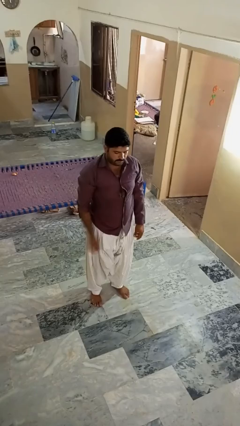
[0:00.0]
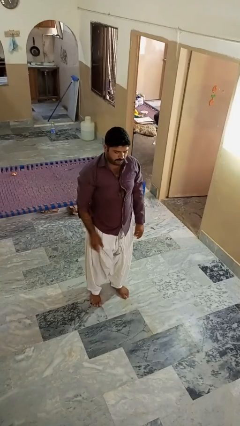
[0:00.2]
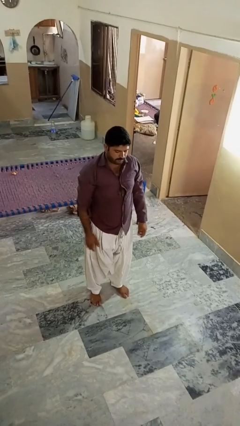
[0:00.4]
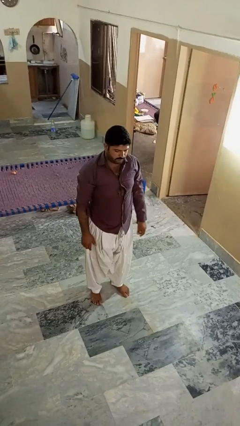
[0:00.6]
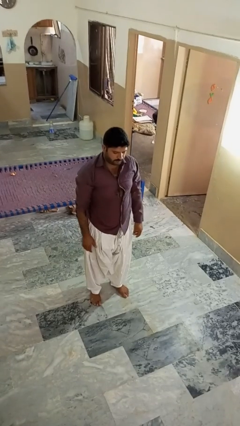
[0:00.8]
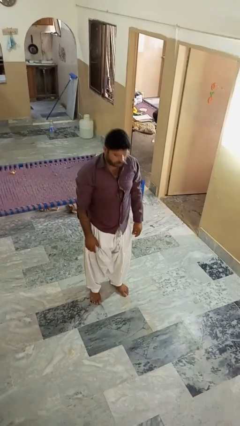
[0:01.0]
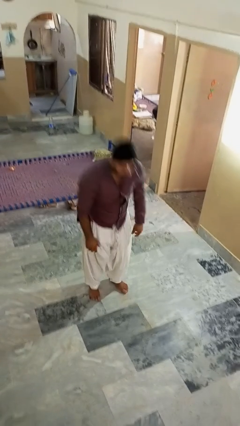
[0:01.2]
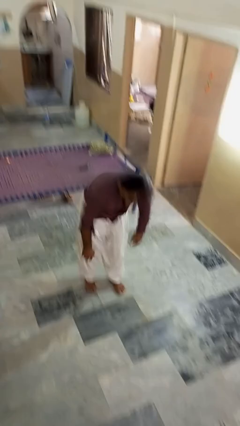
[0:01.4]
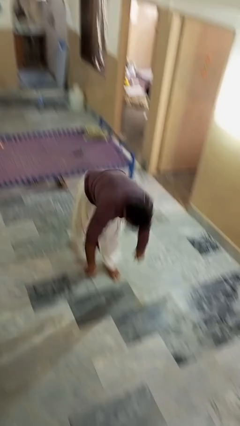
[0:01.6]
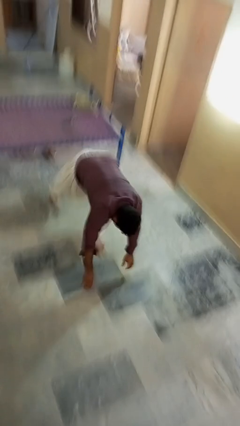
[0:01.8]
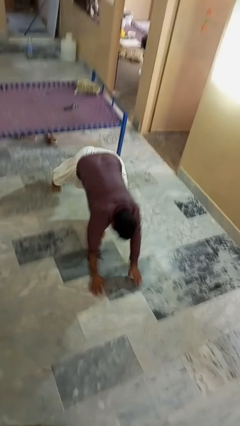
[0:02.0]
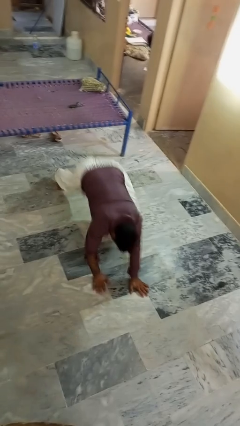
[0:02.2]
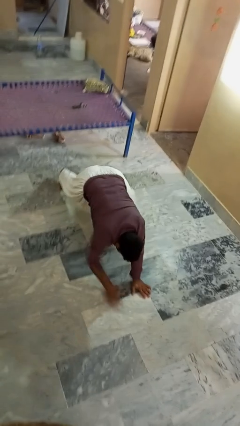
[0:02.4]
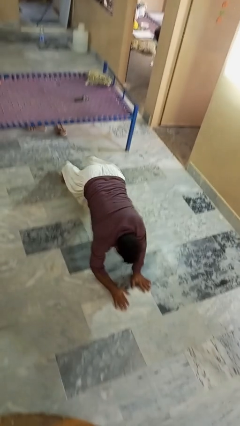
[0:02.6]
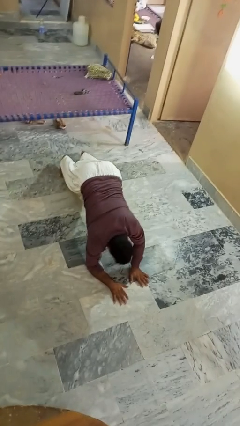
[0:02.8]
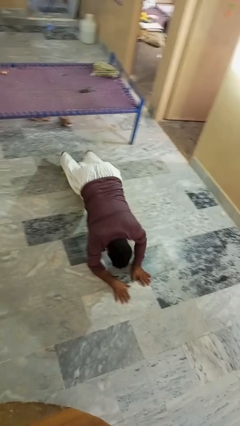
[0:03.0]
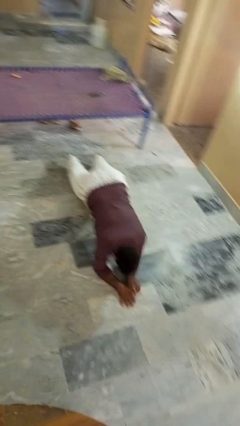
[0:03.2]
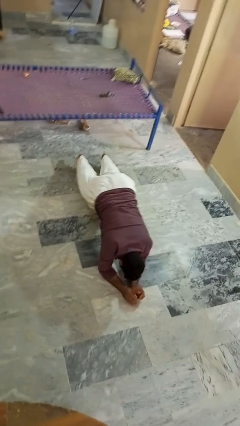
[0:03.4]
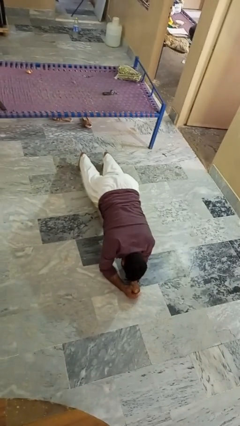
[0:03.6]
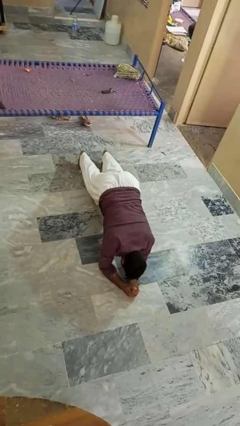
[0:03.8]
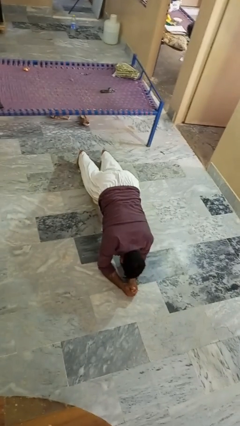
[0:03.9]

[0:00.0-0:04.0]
person exercises with plank

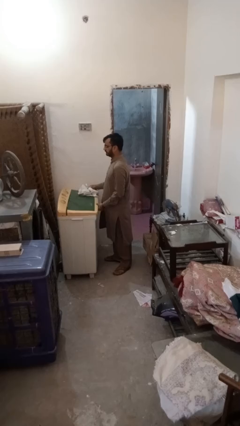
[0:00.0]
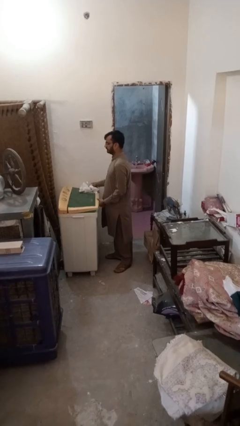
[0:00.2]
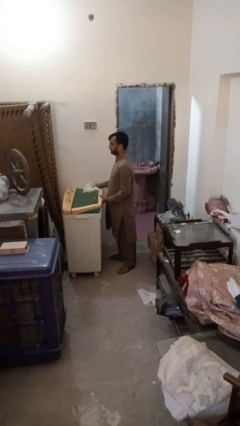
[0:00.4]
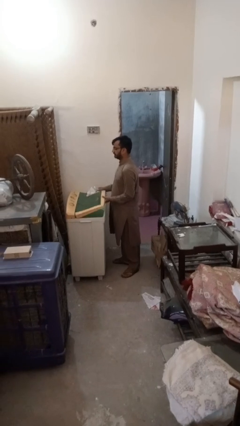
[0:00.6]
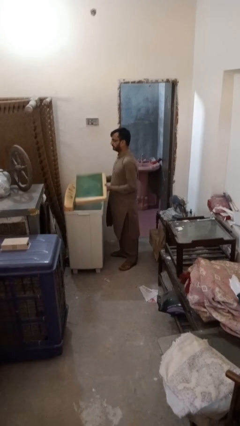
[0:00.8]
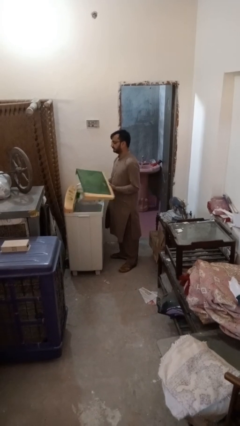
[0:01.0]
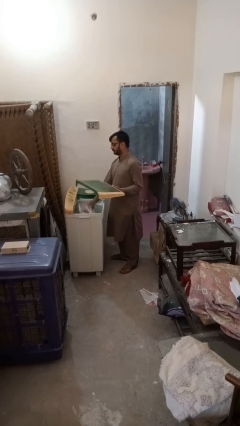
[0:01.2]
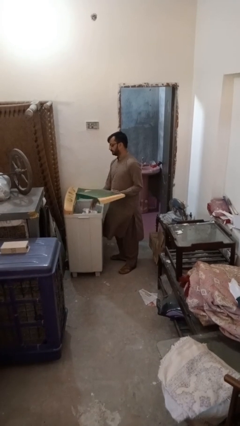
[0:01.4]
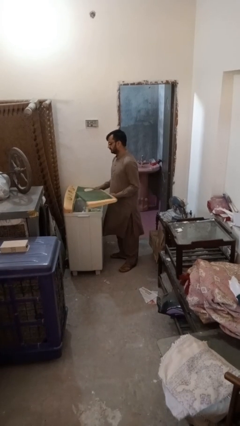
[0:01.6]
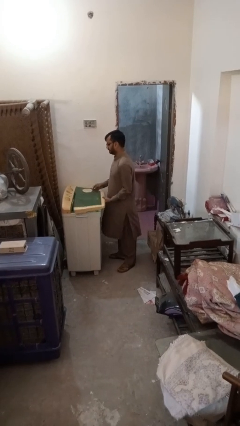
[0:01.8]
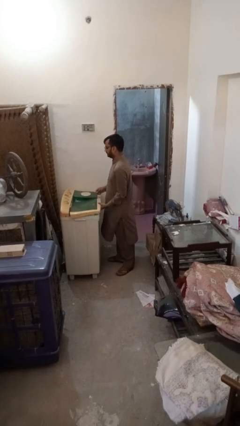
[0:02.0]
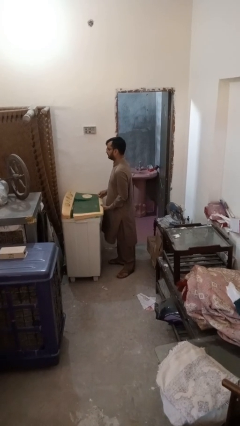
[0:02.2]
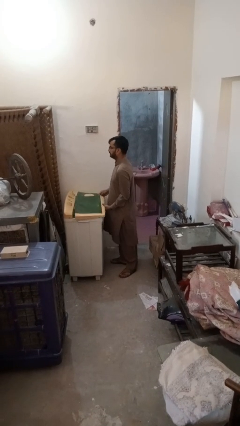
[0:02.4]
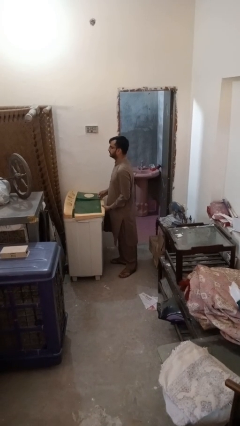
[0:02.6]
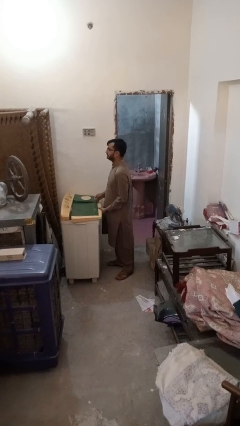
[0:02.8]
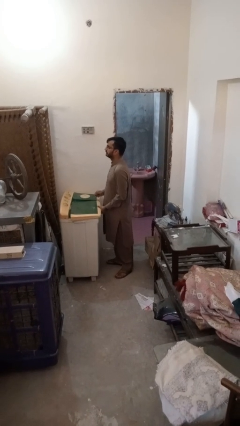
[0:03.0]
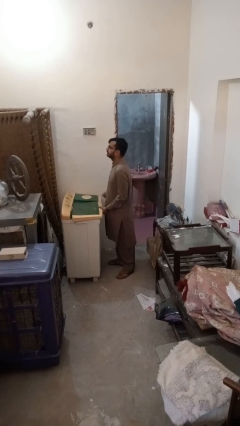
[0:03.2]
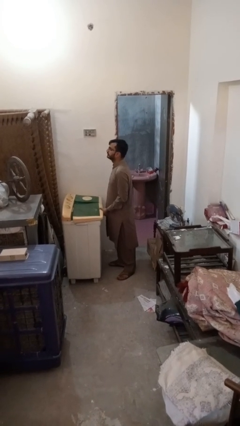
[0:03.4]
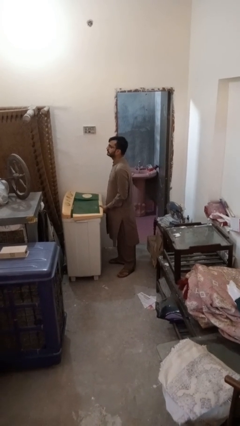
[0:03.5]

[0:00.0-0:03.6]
person loads clotheswasher

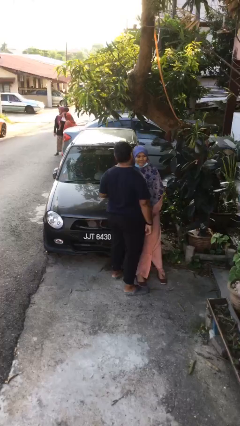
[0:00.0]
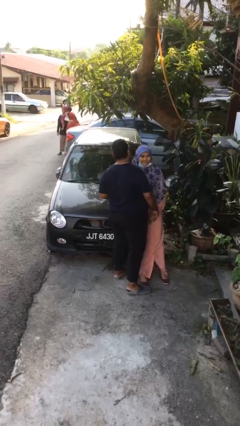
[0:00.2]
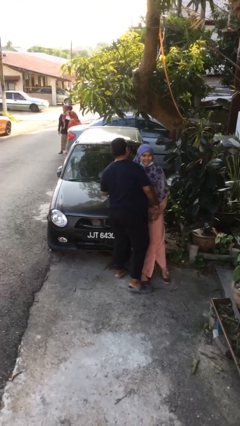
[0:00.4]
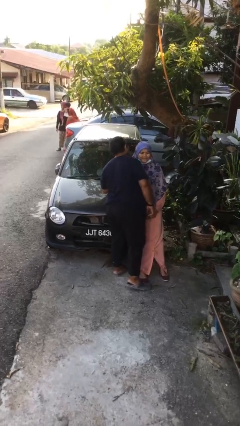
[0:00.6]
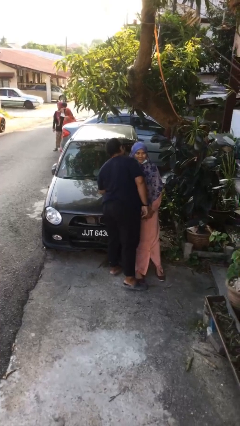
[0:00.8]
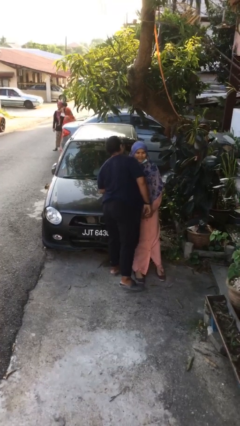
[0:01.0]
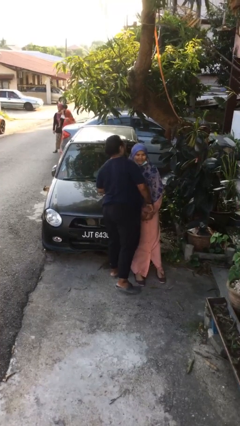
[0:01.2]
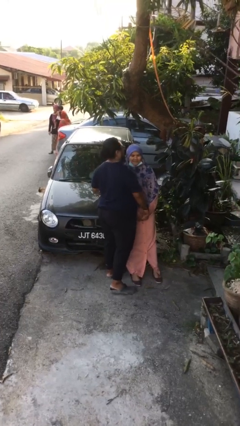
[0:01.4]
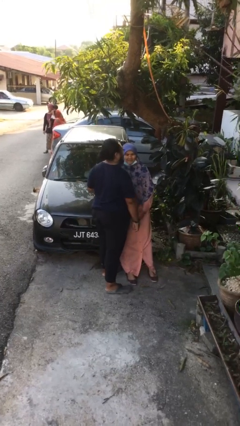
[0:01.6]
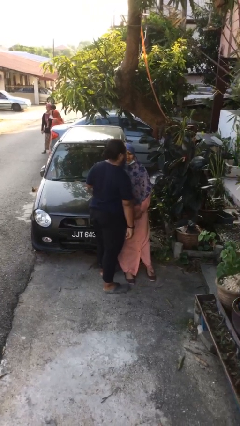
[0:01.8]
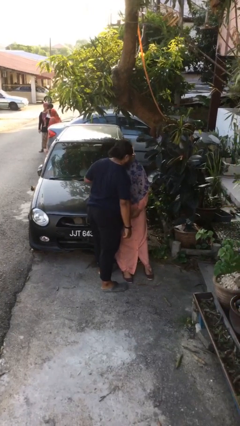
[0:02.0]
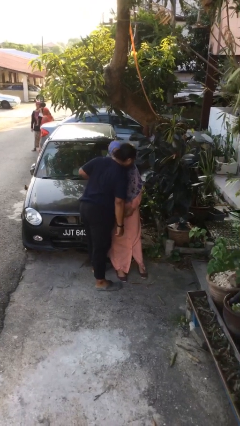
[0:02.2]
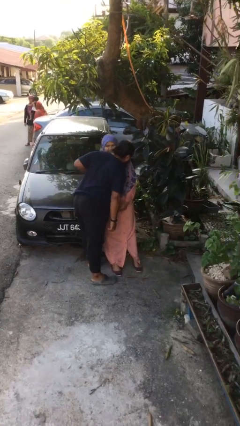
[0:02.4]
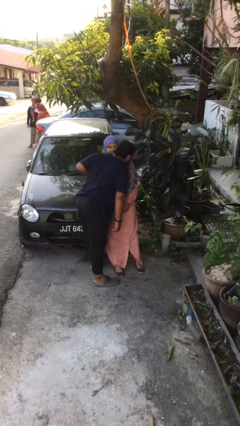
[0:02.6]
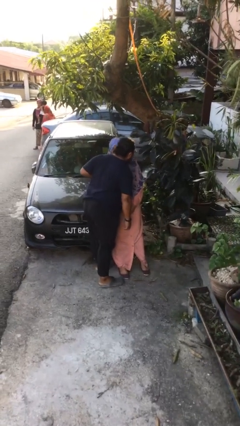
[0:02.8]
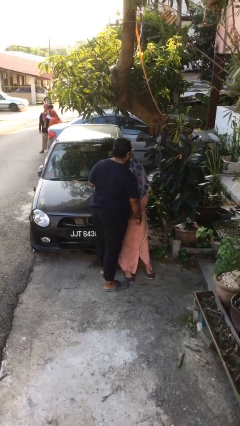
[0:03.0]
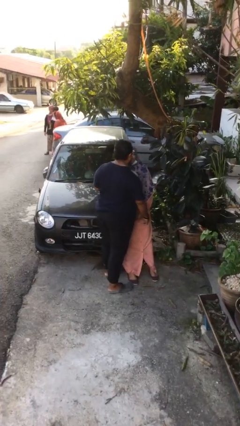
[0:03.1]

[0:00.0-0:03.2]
person kisses cheek of person

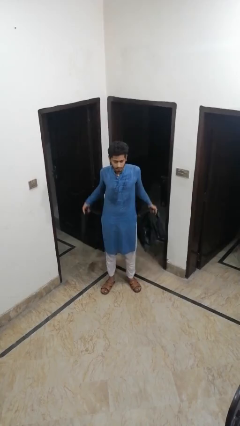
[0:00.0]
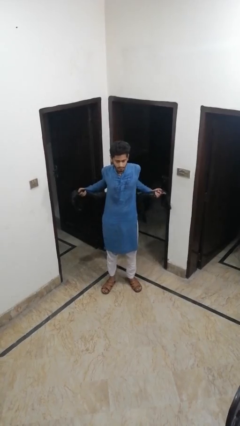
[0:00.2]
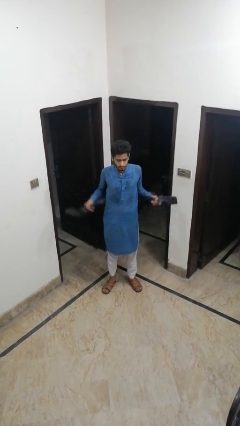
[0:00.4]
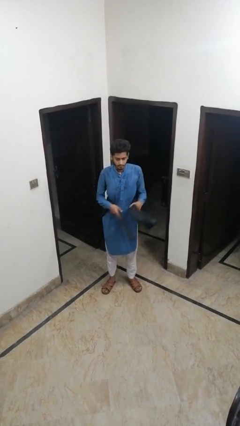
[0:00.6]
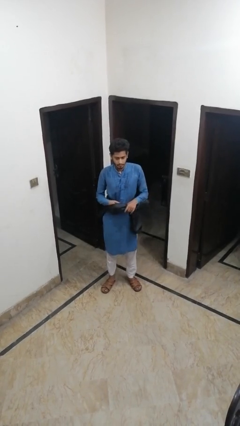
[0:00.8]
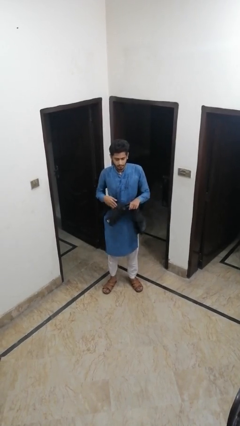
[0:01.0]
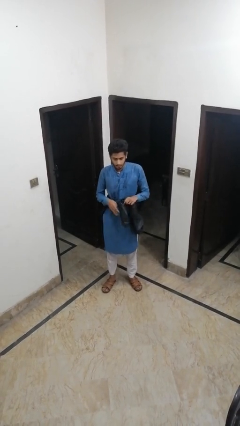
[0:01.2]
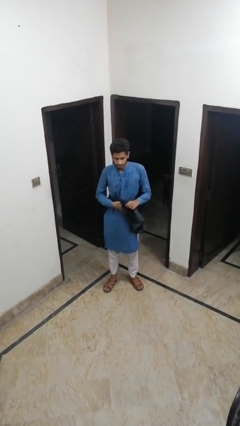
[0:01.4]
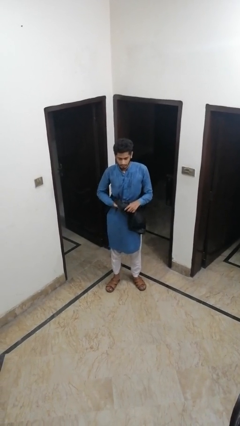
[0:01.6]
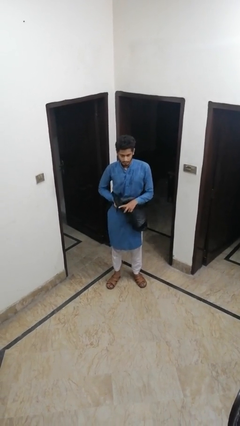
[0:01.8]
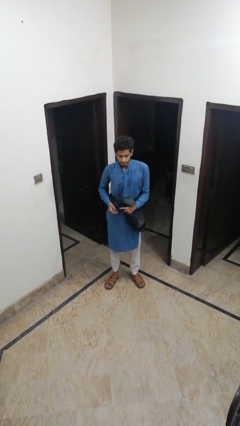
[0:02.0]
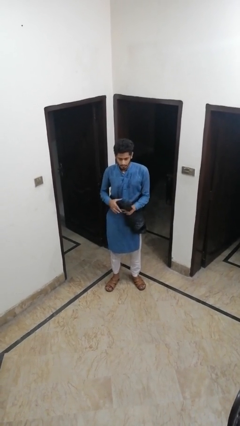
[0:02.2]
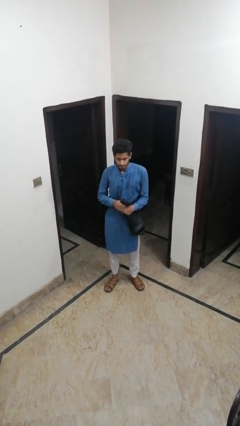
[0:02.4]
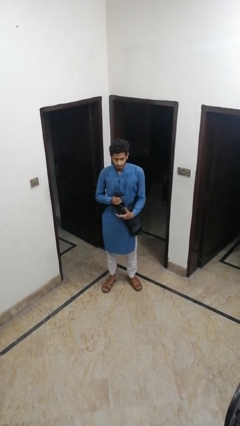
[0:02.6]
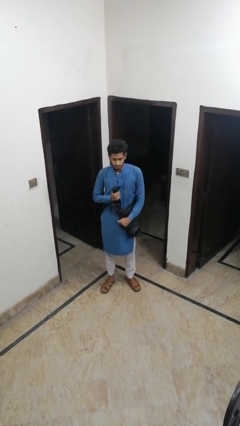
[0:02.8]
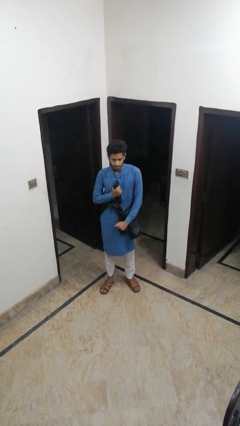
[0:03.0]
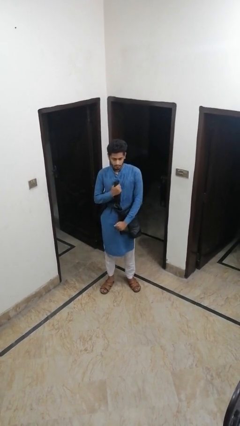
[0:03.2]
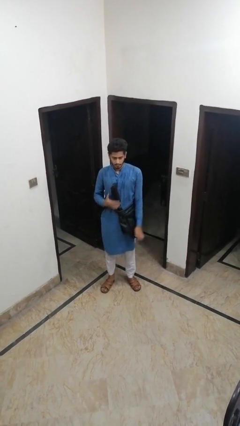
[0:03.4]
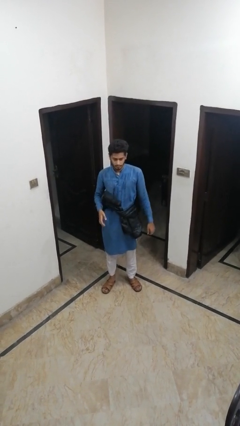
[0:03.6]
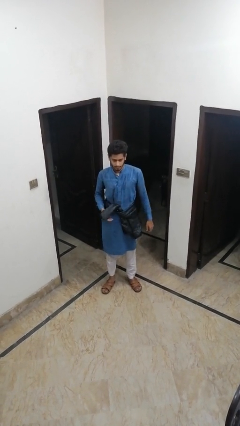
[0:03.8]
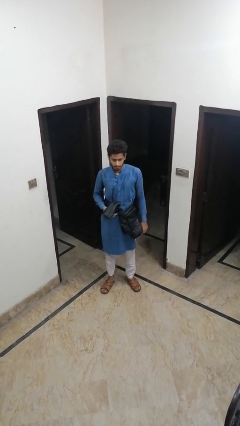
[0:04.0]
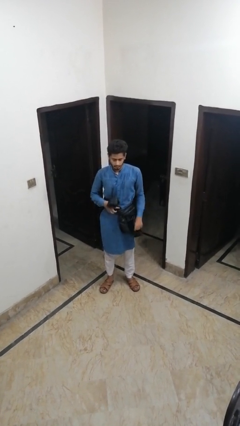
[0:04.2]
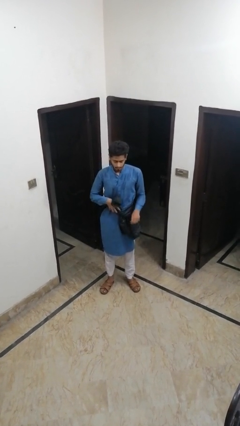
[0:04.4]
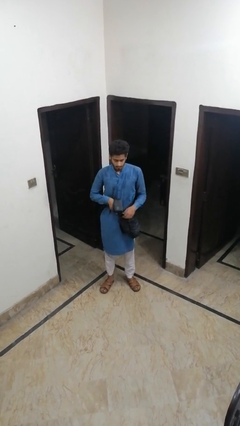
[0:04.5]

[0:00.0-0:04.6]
person ties jacket around waist

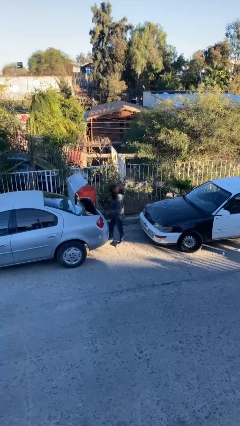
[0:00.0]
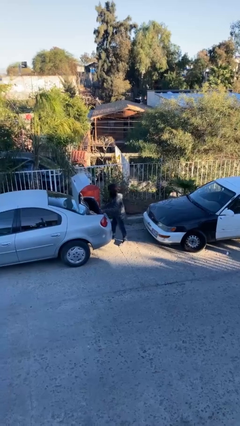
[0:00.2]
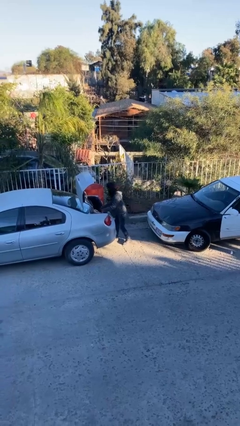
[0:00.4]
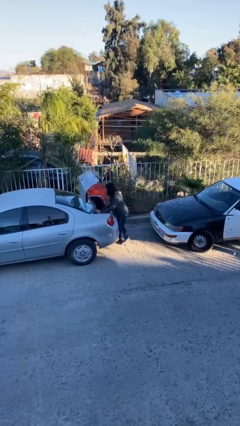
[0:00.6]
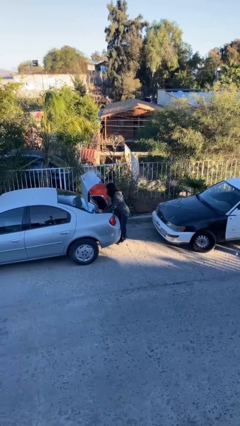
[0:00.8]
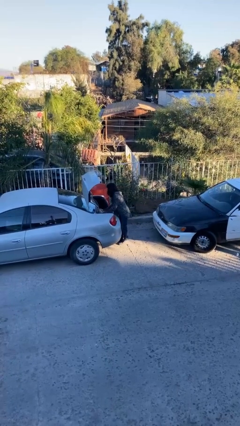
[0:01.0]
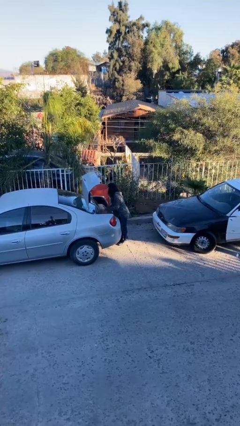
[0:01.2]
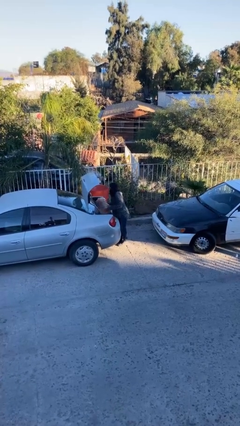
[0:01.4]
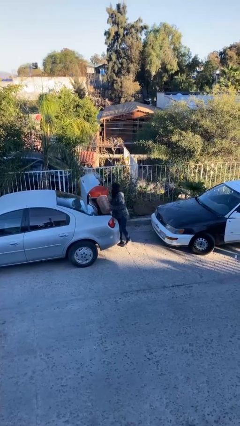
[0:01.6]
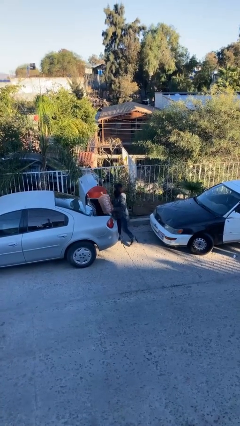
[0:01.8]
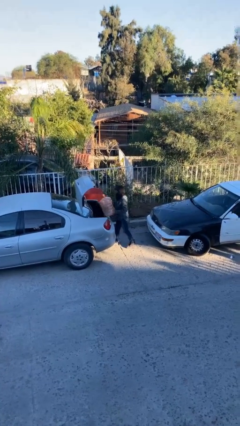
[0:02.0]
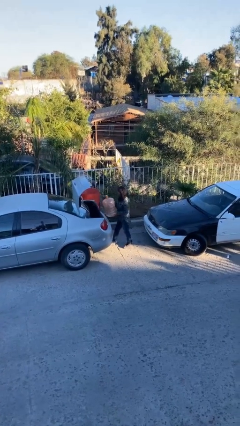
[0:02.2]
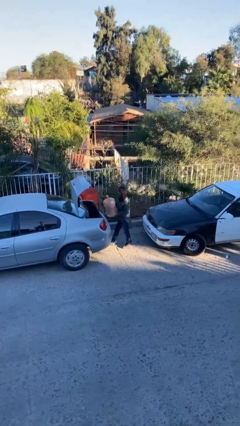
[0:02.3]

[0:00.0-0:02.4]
person unloads car

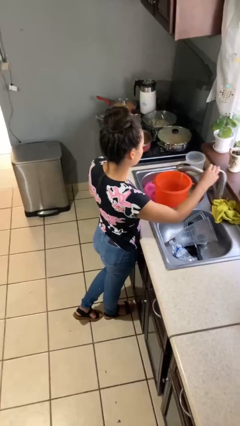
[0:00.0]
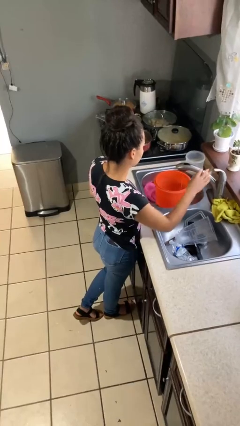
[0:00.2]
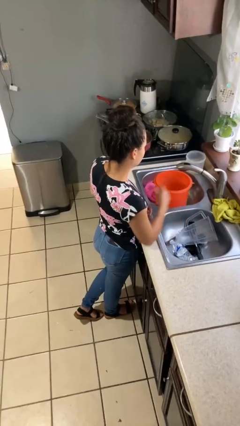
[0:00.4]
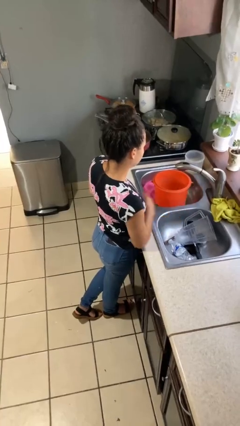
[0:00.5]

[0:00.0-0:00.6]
person turns off faucet
